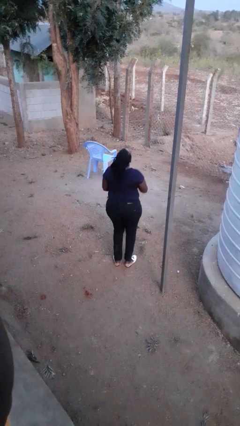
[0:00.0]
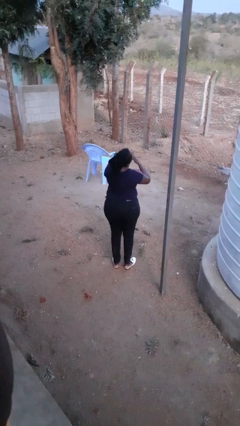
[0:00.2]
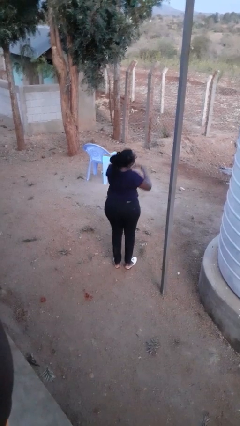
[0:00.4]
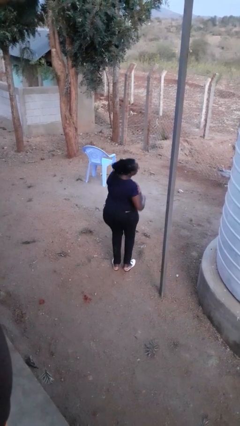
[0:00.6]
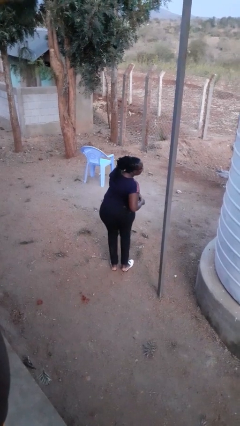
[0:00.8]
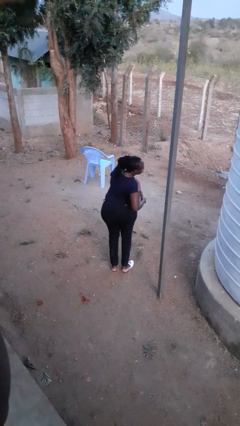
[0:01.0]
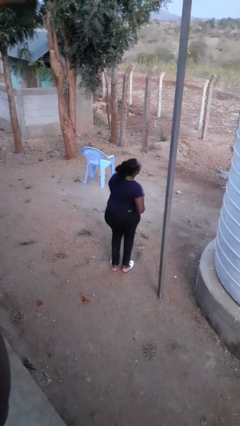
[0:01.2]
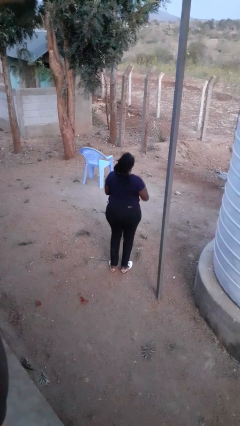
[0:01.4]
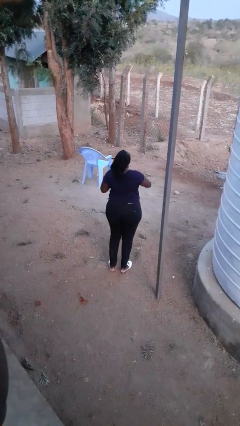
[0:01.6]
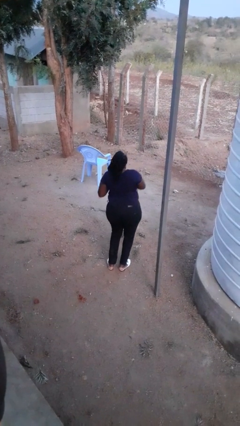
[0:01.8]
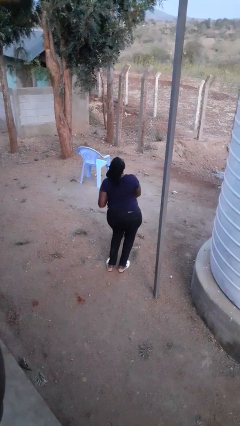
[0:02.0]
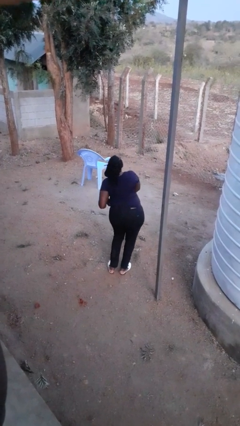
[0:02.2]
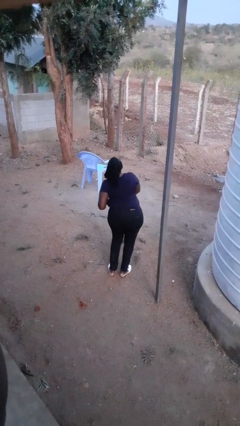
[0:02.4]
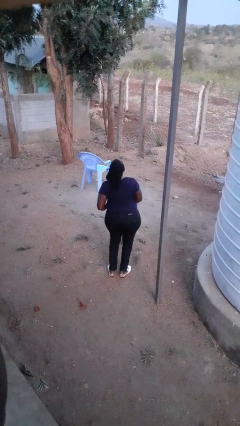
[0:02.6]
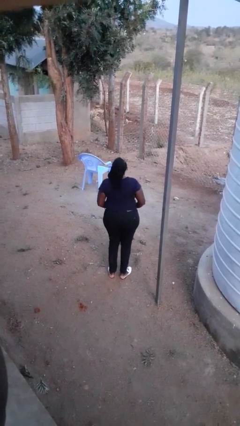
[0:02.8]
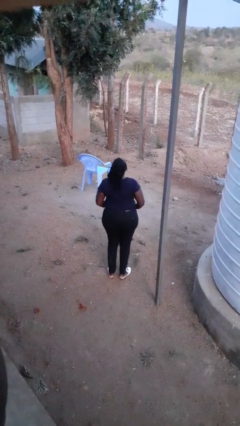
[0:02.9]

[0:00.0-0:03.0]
person dances in place

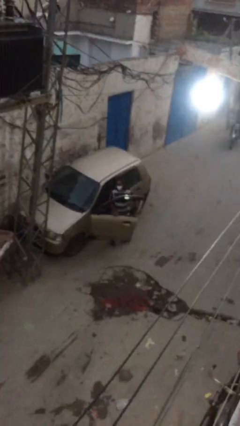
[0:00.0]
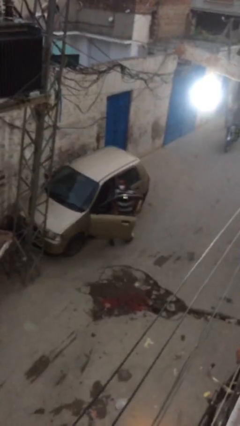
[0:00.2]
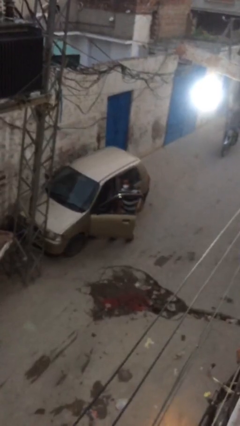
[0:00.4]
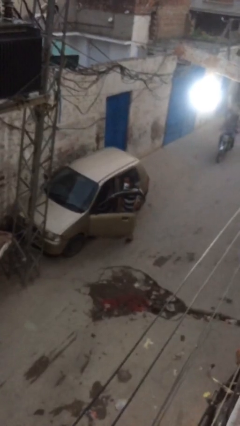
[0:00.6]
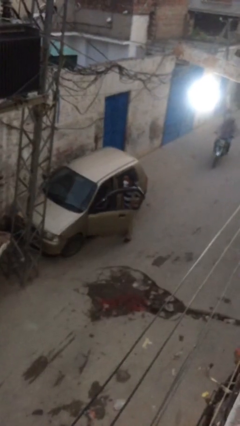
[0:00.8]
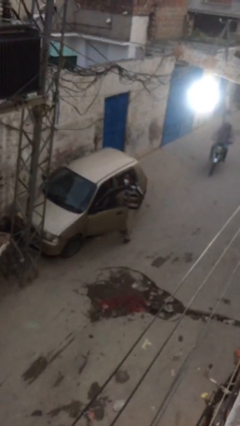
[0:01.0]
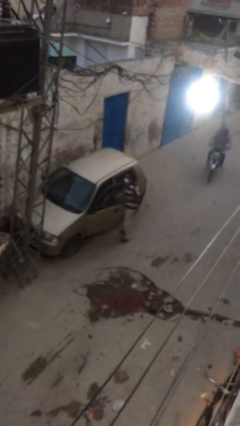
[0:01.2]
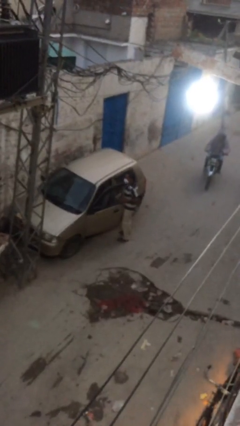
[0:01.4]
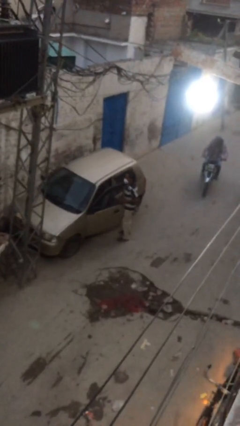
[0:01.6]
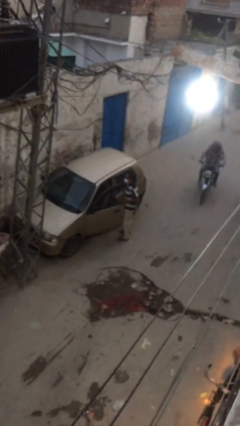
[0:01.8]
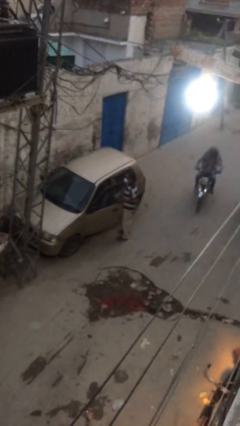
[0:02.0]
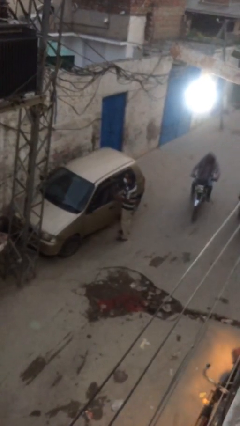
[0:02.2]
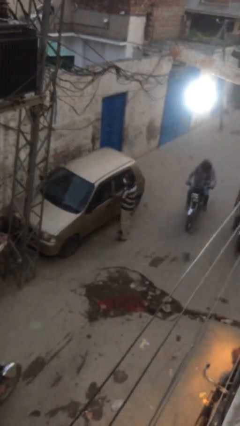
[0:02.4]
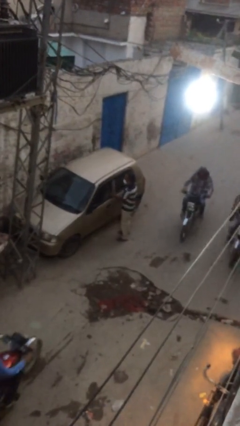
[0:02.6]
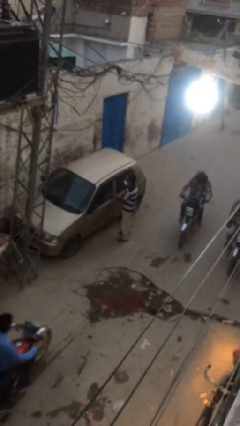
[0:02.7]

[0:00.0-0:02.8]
person closes car door

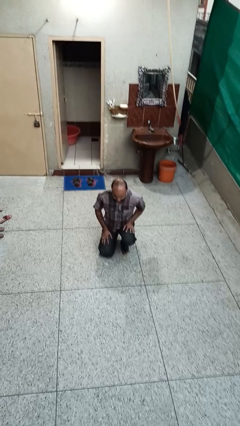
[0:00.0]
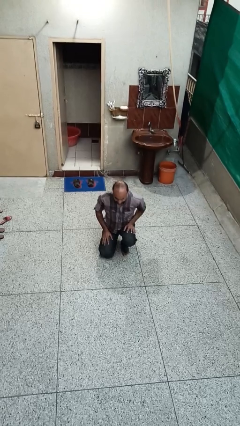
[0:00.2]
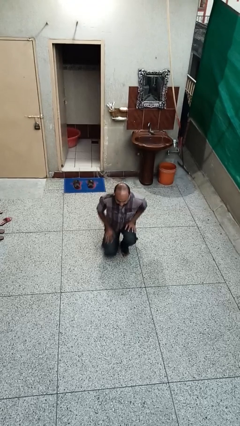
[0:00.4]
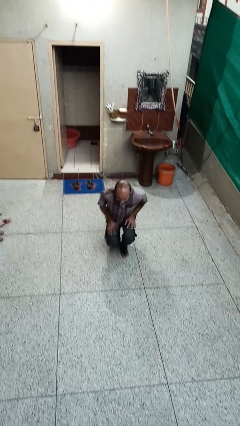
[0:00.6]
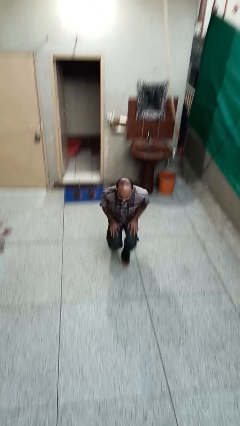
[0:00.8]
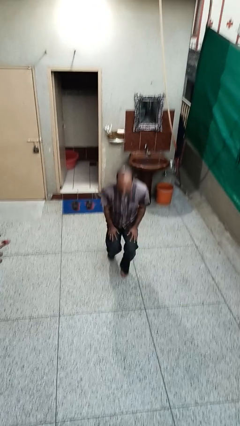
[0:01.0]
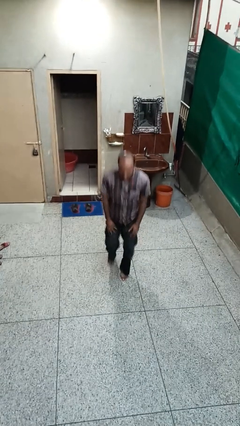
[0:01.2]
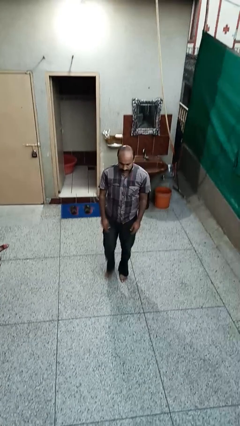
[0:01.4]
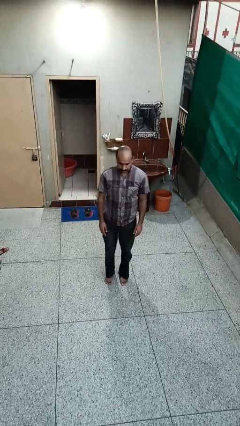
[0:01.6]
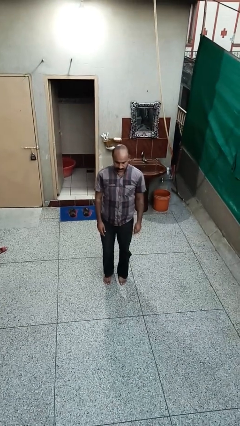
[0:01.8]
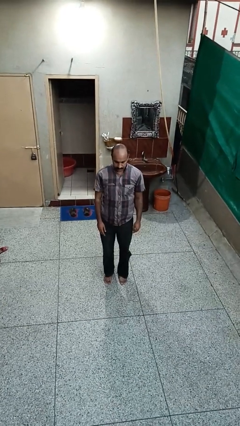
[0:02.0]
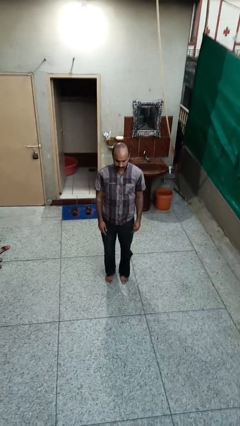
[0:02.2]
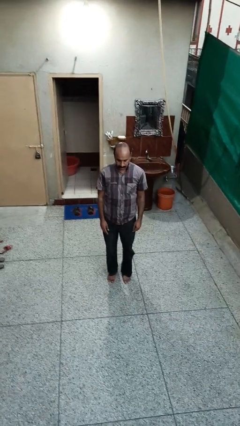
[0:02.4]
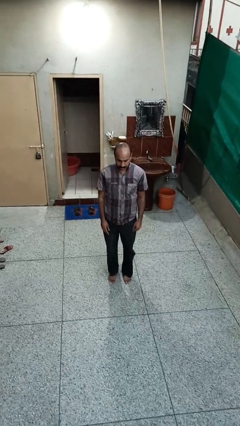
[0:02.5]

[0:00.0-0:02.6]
person stands up from floor

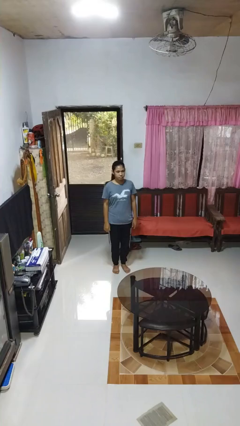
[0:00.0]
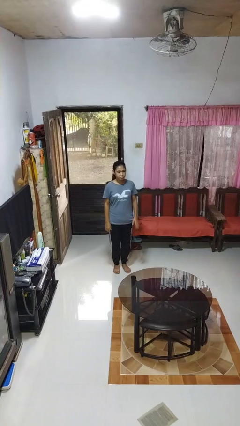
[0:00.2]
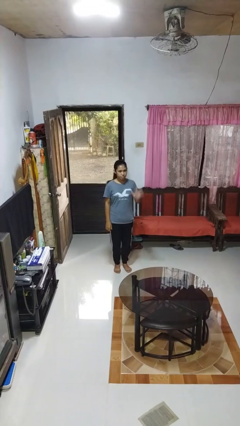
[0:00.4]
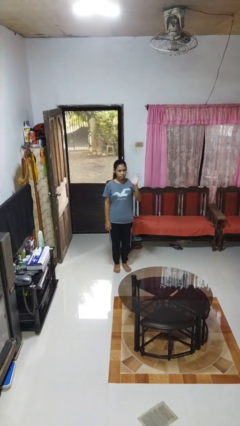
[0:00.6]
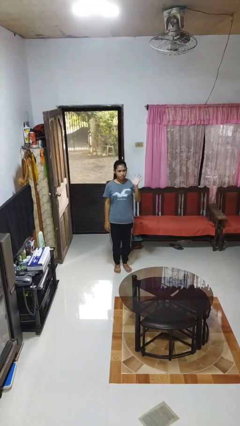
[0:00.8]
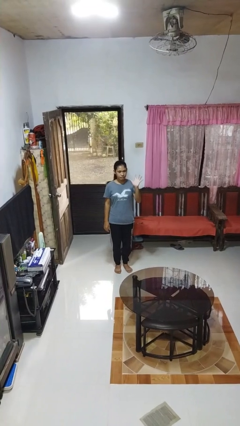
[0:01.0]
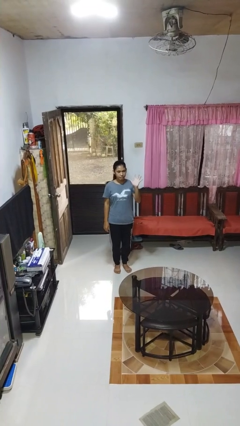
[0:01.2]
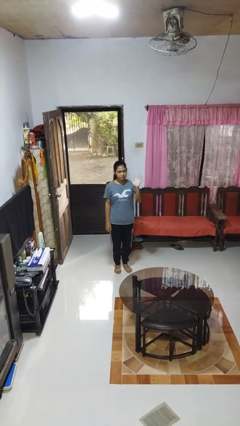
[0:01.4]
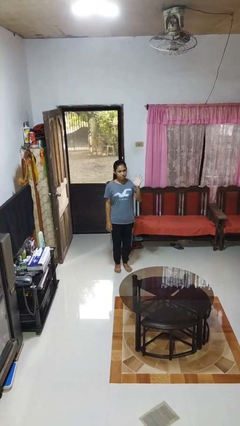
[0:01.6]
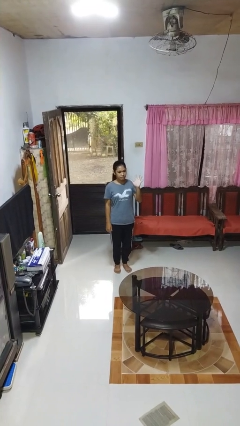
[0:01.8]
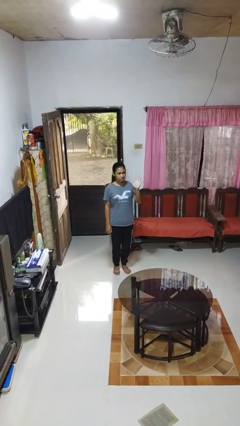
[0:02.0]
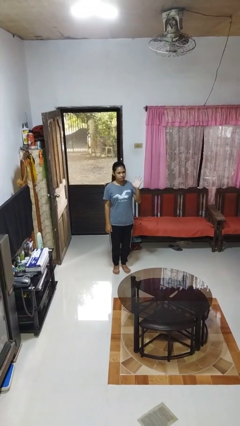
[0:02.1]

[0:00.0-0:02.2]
person gestures number five

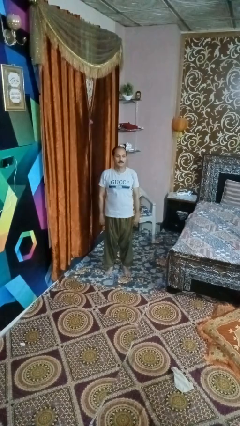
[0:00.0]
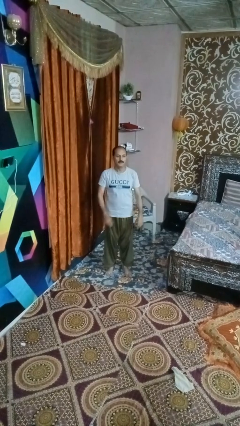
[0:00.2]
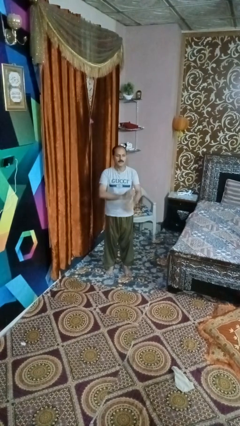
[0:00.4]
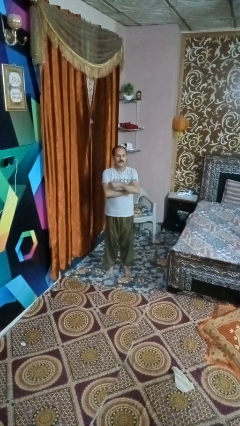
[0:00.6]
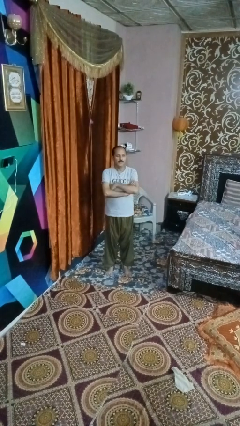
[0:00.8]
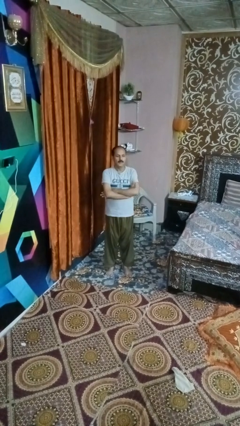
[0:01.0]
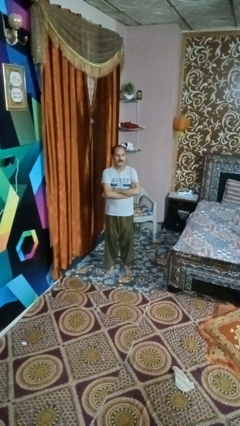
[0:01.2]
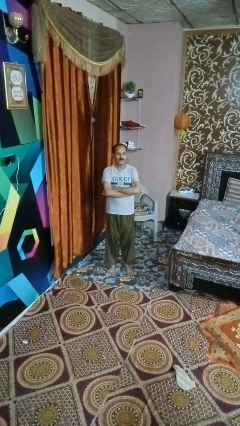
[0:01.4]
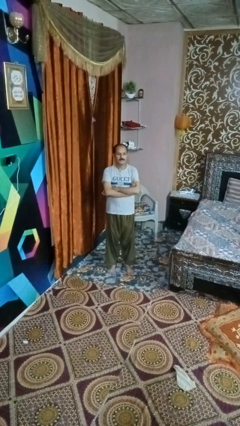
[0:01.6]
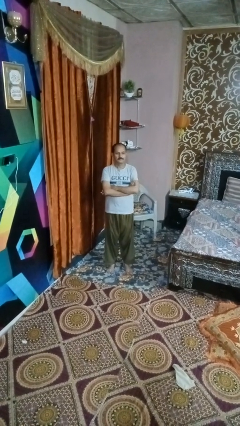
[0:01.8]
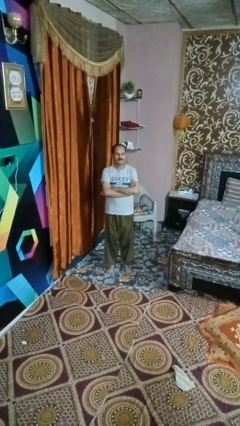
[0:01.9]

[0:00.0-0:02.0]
person crosses arms

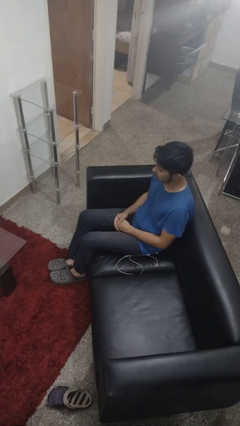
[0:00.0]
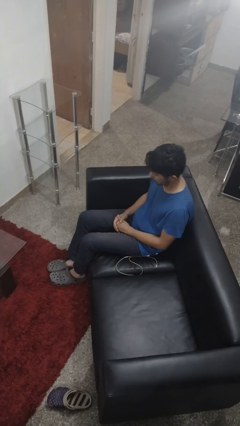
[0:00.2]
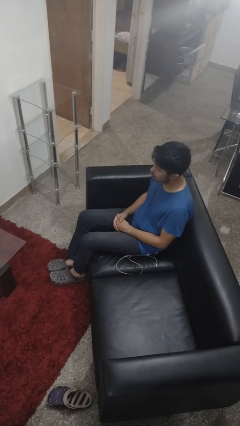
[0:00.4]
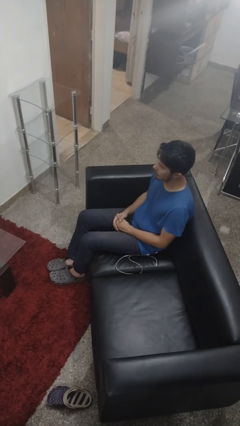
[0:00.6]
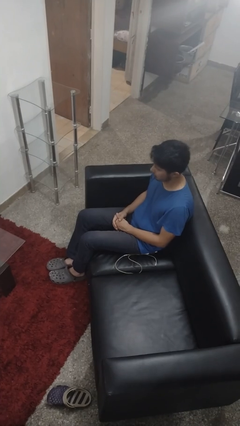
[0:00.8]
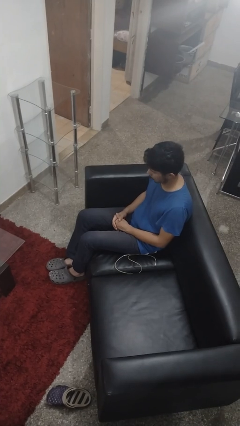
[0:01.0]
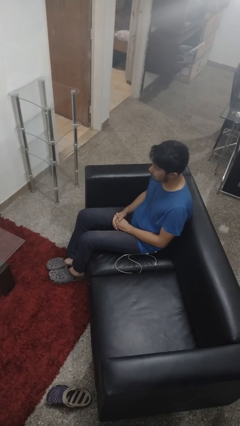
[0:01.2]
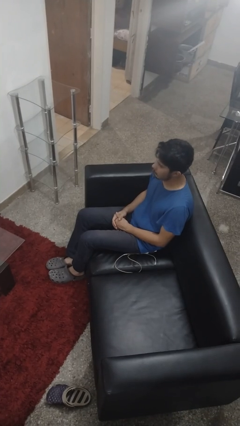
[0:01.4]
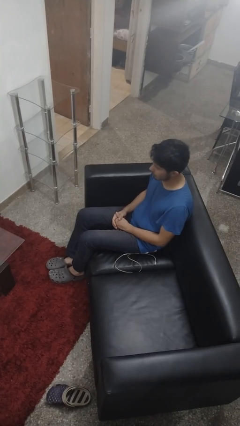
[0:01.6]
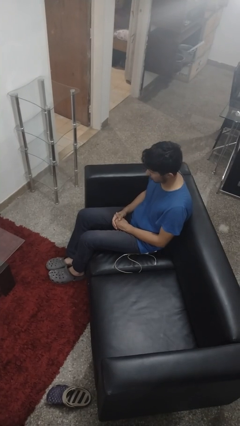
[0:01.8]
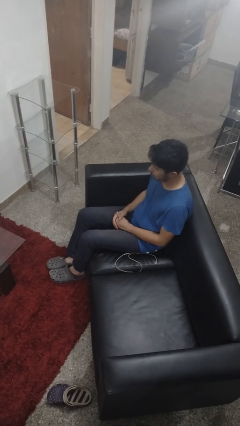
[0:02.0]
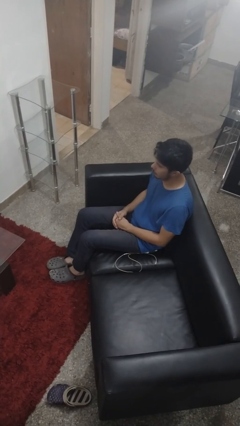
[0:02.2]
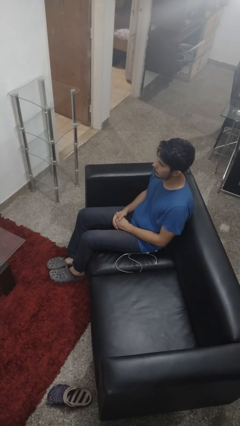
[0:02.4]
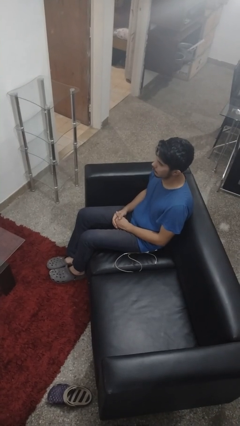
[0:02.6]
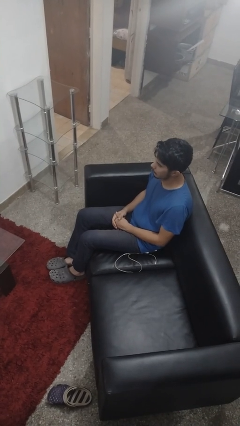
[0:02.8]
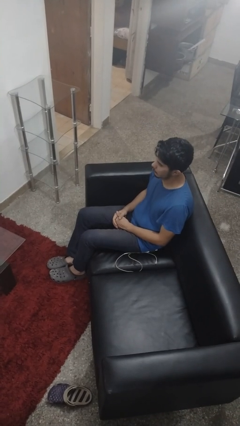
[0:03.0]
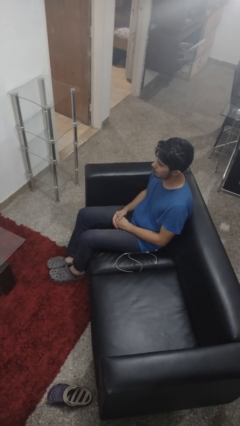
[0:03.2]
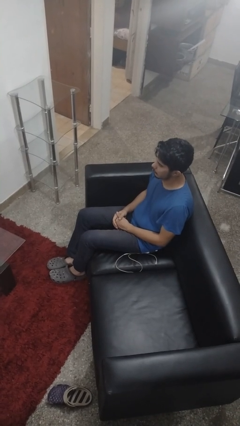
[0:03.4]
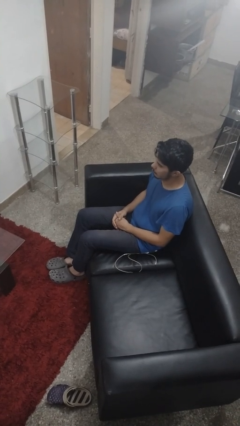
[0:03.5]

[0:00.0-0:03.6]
person nods head

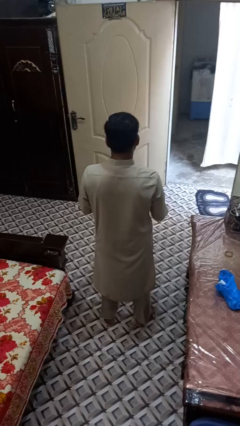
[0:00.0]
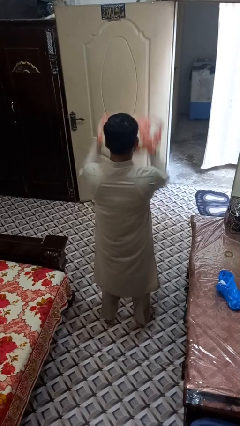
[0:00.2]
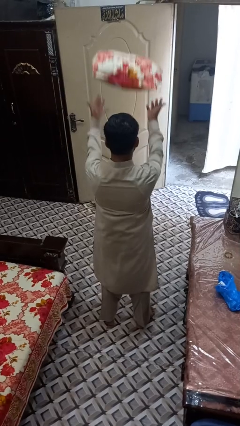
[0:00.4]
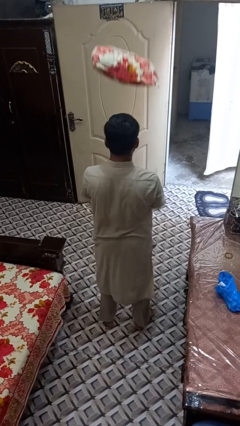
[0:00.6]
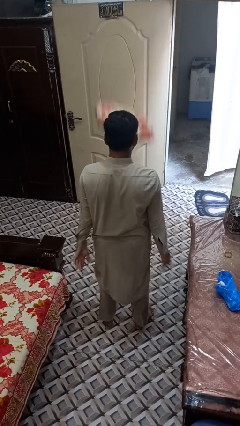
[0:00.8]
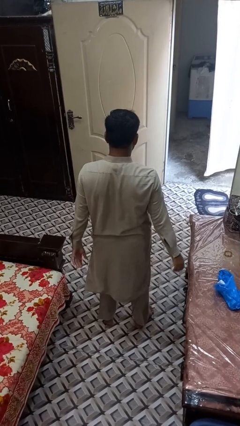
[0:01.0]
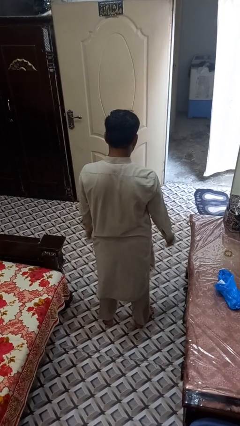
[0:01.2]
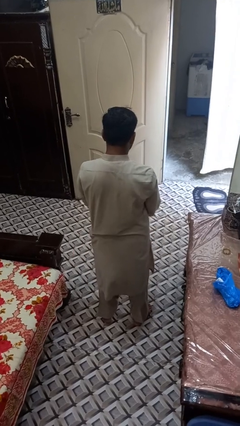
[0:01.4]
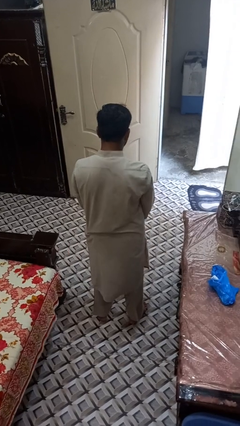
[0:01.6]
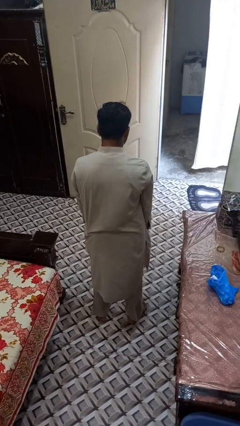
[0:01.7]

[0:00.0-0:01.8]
person throws object into air
